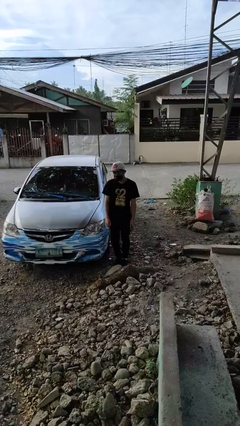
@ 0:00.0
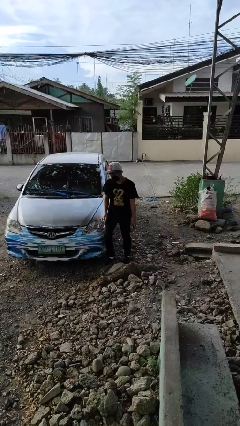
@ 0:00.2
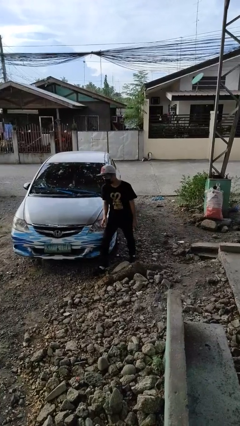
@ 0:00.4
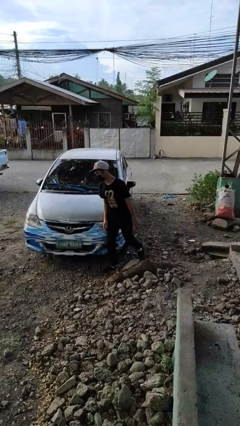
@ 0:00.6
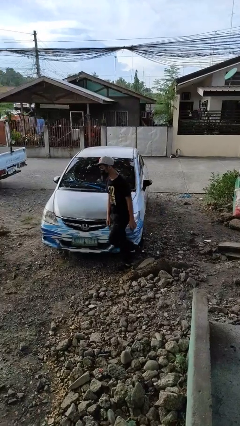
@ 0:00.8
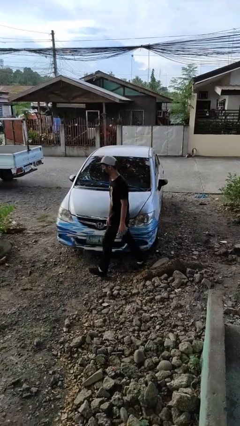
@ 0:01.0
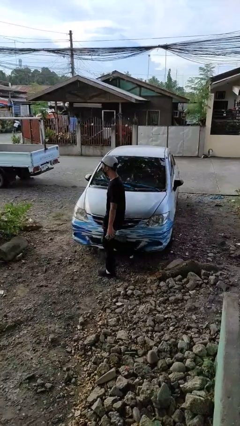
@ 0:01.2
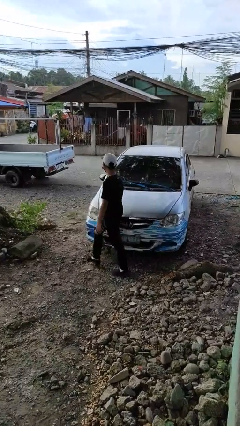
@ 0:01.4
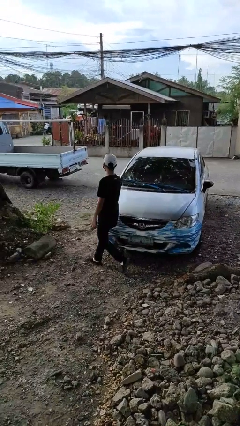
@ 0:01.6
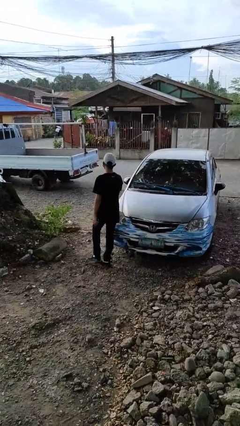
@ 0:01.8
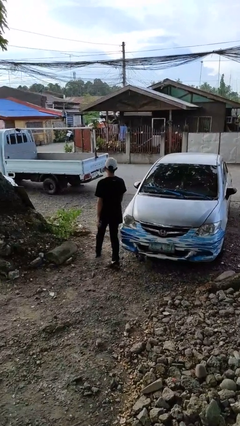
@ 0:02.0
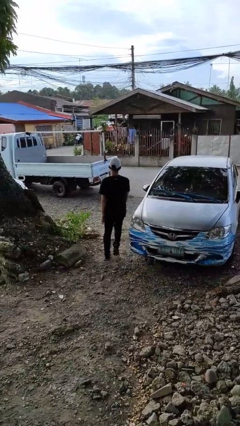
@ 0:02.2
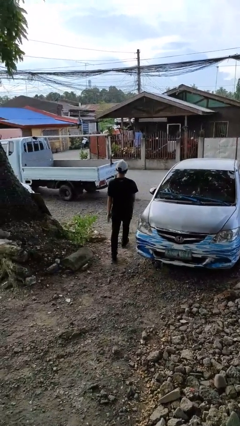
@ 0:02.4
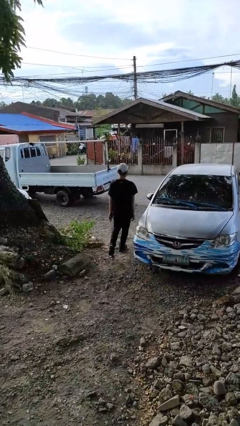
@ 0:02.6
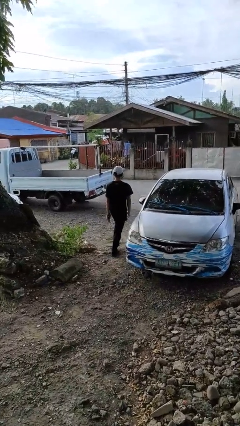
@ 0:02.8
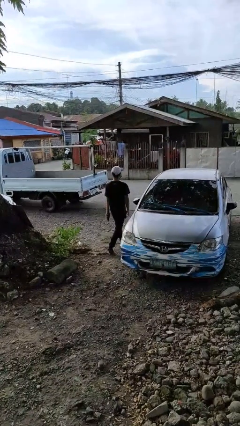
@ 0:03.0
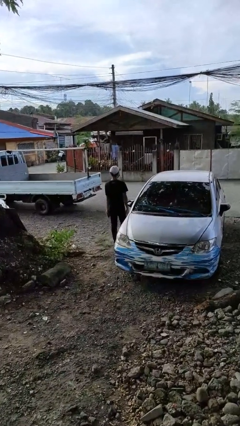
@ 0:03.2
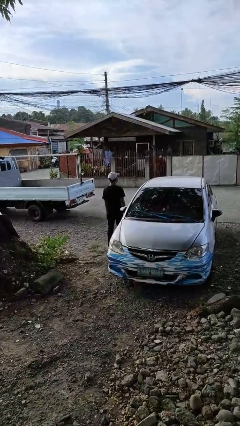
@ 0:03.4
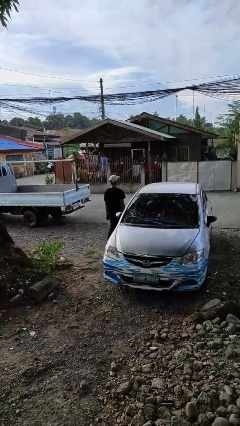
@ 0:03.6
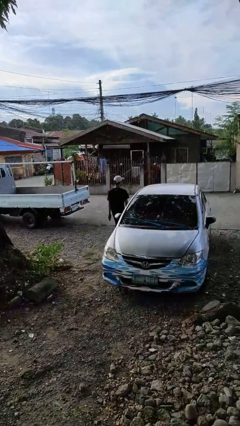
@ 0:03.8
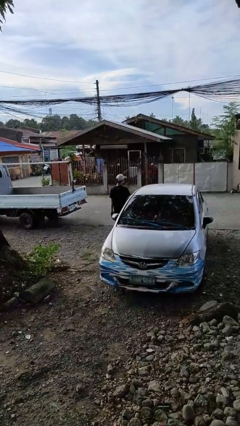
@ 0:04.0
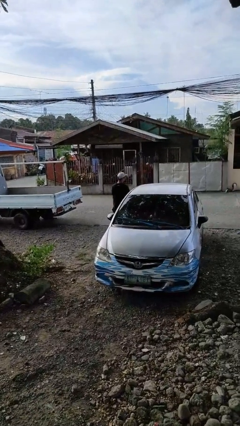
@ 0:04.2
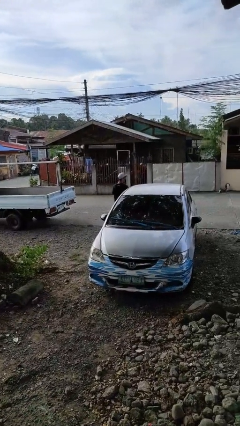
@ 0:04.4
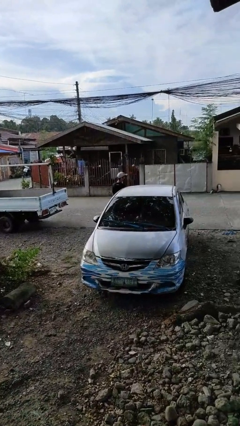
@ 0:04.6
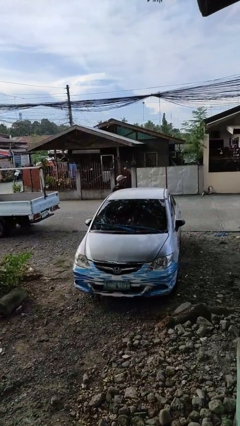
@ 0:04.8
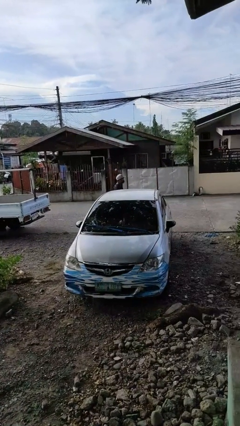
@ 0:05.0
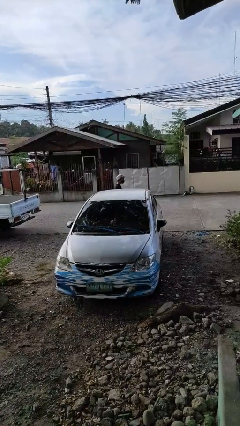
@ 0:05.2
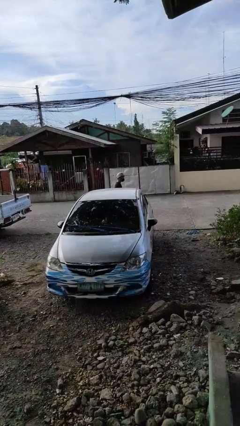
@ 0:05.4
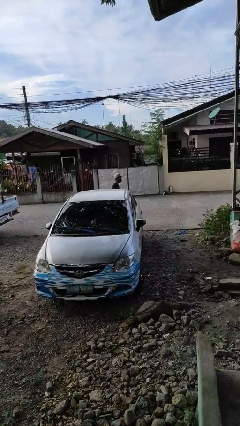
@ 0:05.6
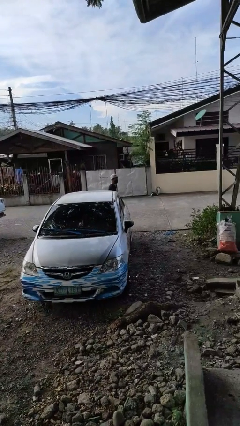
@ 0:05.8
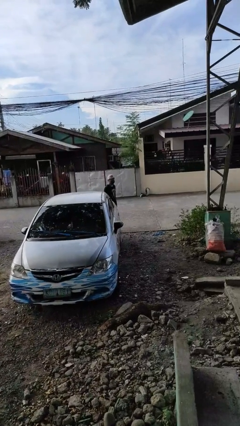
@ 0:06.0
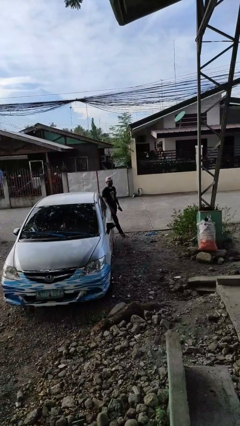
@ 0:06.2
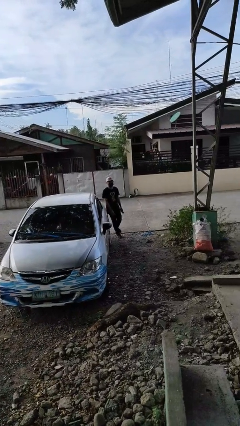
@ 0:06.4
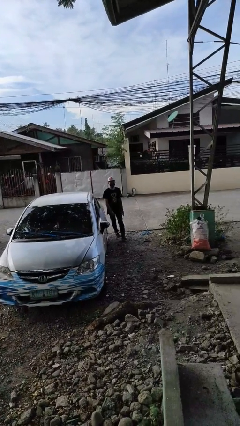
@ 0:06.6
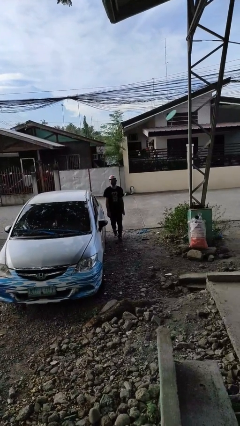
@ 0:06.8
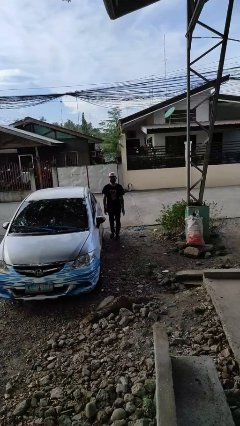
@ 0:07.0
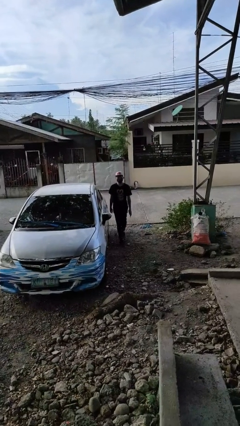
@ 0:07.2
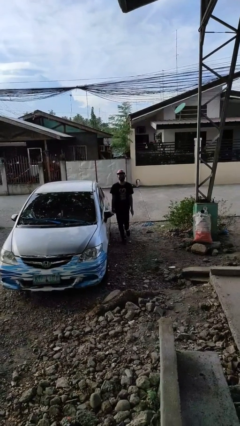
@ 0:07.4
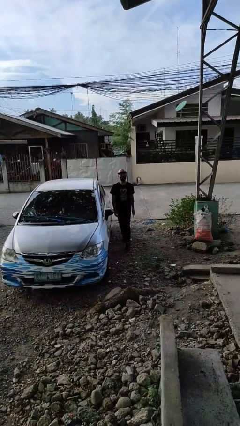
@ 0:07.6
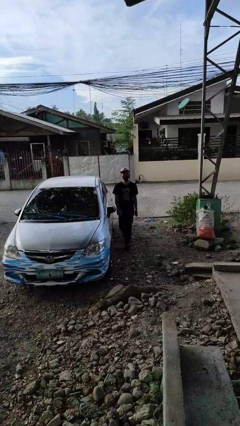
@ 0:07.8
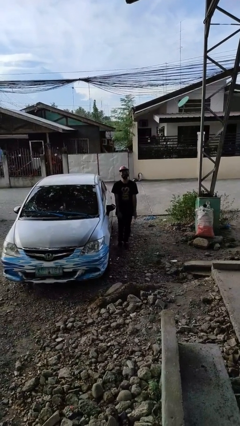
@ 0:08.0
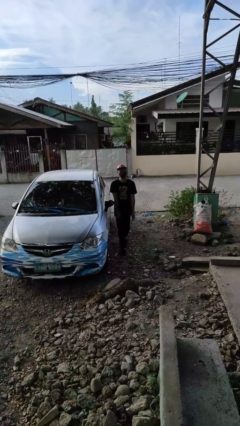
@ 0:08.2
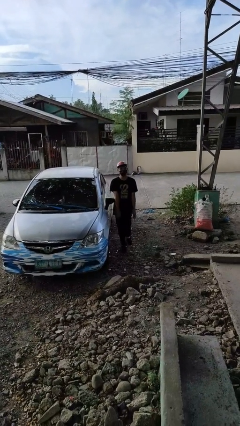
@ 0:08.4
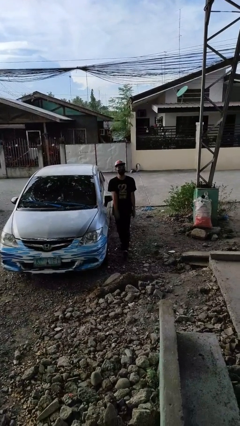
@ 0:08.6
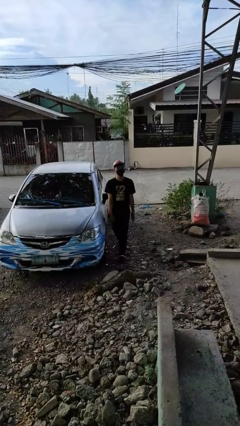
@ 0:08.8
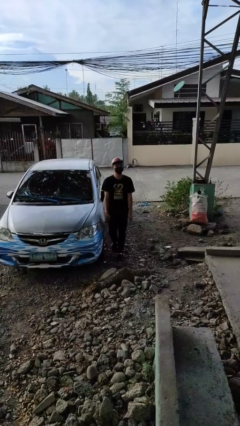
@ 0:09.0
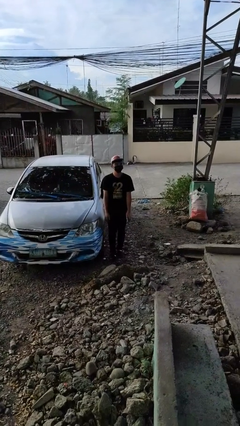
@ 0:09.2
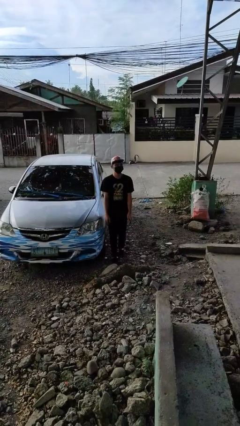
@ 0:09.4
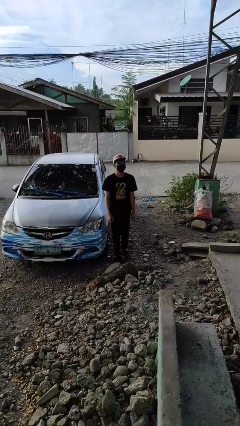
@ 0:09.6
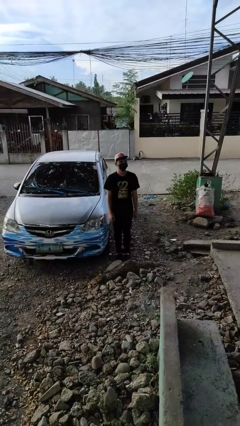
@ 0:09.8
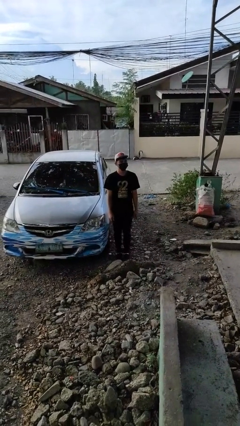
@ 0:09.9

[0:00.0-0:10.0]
person walks around car

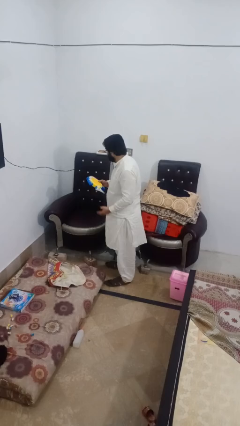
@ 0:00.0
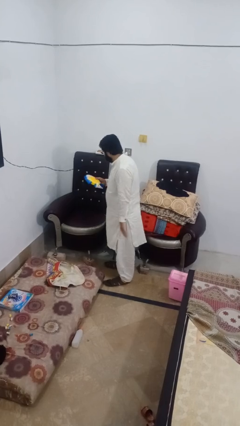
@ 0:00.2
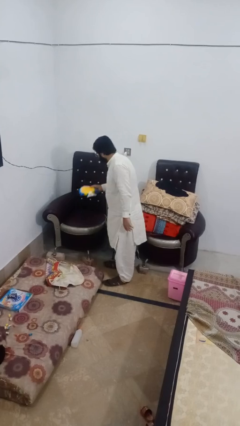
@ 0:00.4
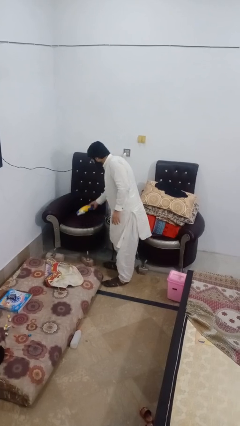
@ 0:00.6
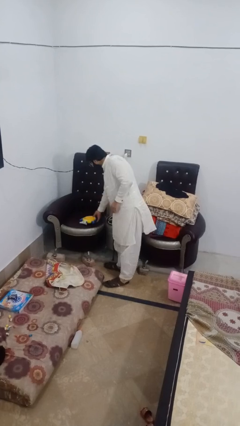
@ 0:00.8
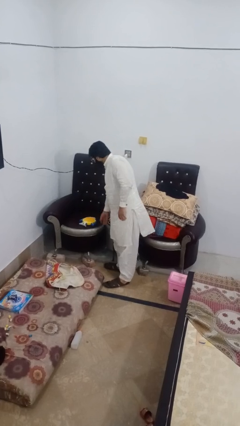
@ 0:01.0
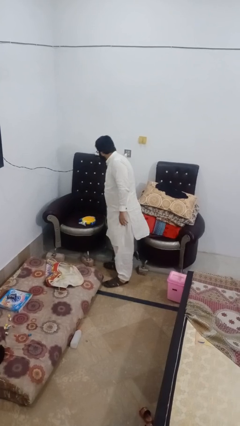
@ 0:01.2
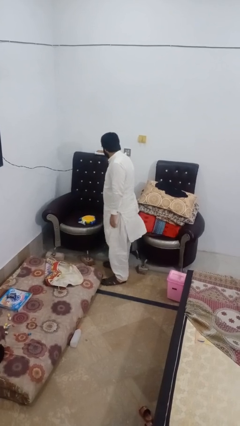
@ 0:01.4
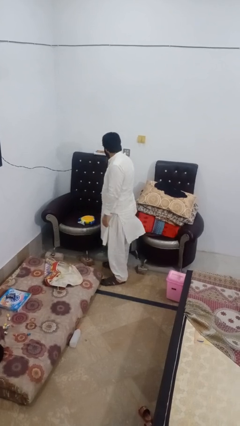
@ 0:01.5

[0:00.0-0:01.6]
person puts down object on couch

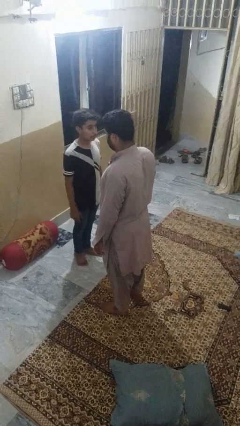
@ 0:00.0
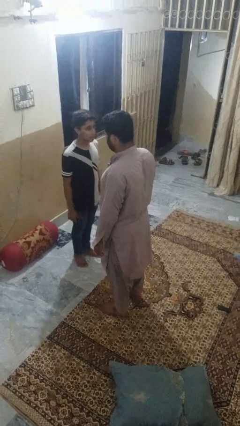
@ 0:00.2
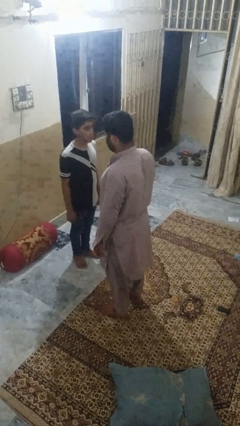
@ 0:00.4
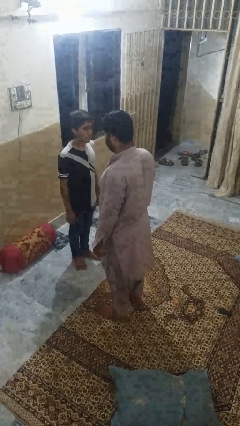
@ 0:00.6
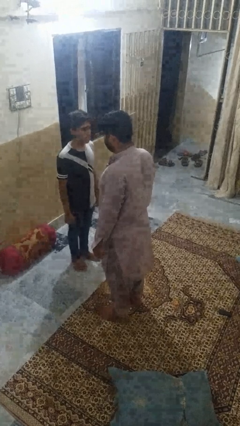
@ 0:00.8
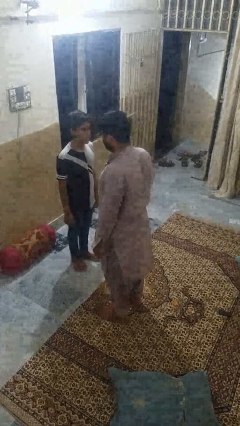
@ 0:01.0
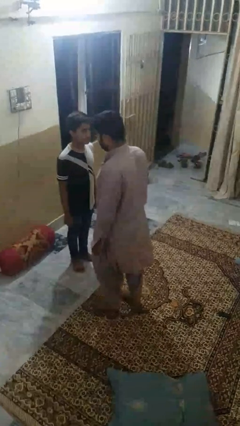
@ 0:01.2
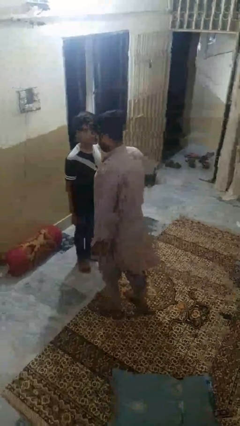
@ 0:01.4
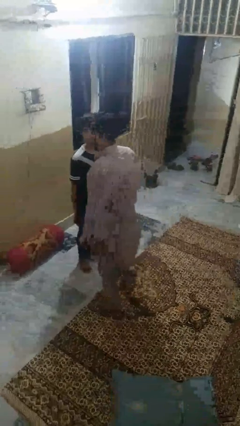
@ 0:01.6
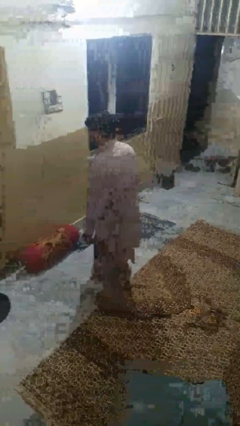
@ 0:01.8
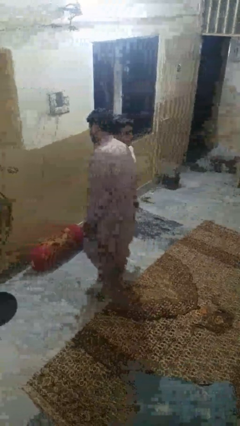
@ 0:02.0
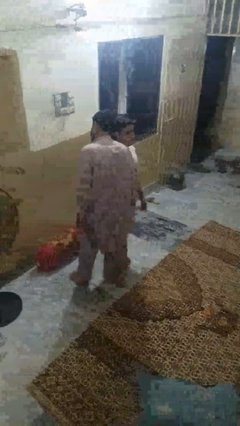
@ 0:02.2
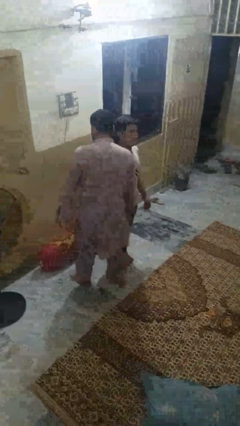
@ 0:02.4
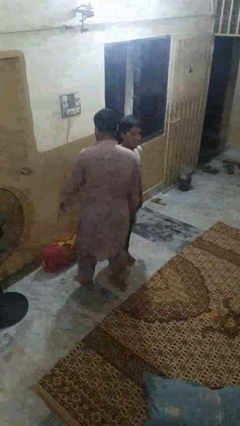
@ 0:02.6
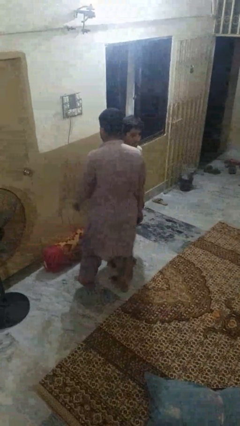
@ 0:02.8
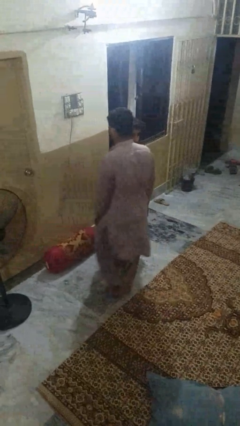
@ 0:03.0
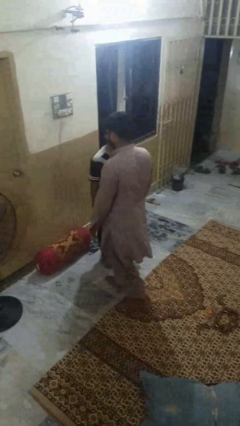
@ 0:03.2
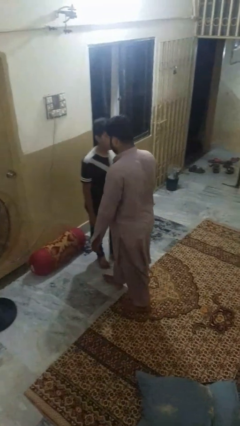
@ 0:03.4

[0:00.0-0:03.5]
person bumps into person

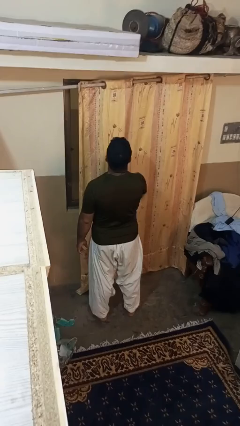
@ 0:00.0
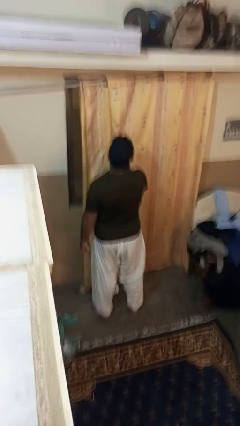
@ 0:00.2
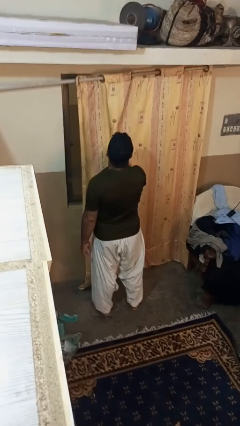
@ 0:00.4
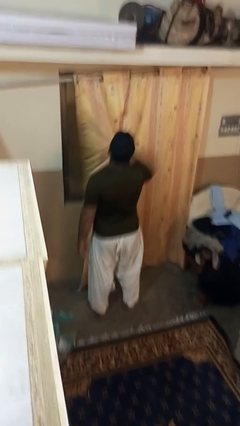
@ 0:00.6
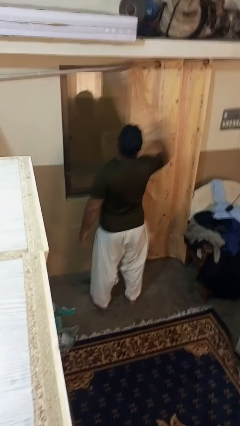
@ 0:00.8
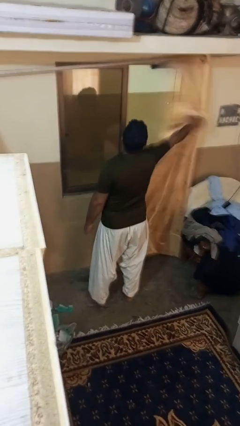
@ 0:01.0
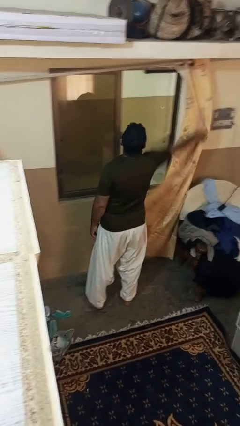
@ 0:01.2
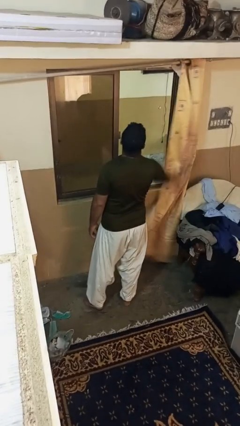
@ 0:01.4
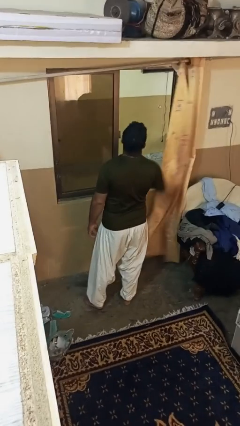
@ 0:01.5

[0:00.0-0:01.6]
person opens curtains

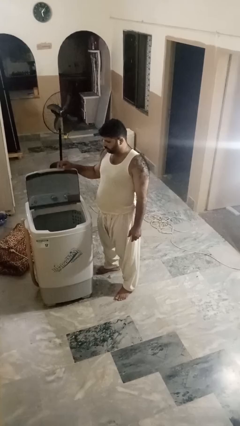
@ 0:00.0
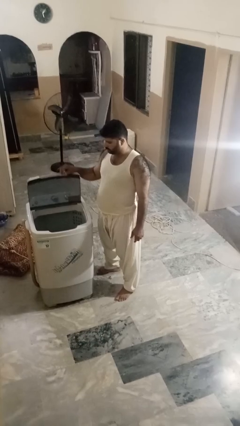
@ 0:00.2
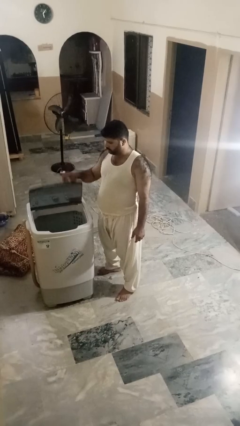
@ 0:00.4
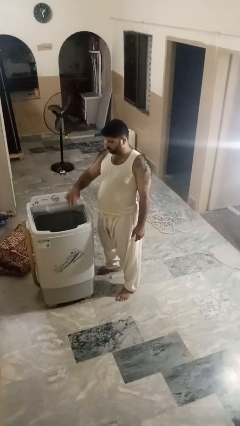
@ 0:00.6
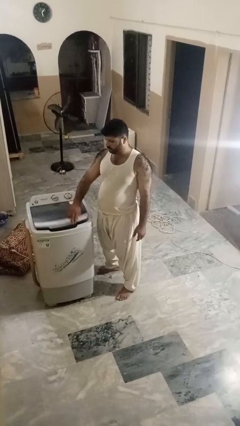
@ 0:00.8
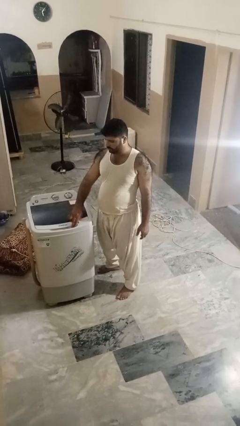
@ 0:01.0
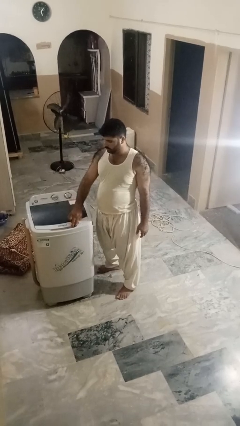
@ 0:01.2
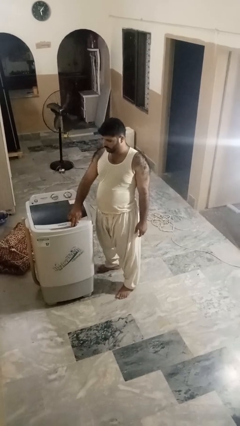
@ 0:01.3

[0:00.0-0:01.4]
person closes clothes washer
